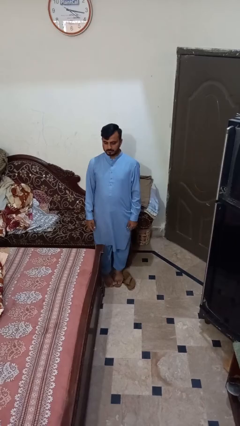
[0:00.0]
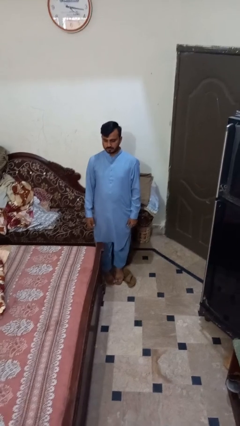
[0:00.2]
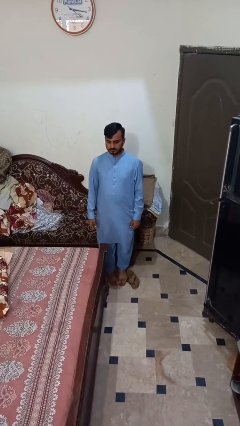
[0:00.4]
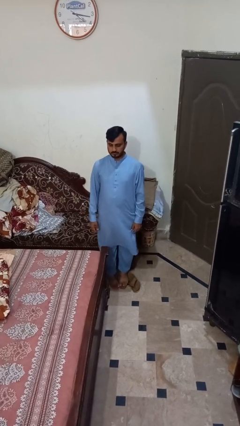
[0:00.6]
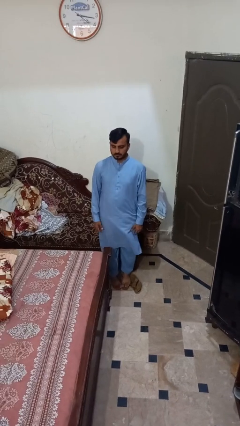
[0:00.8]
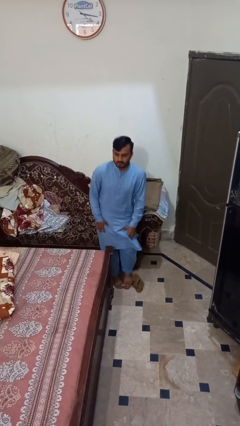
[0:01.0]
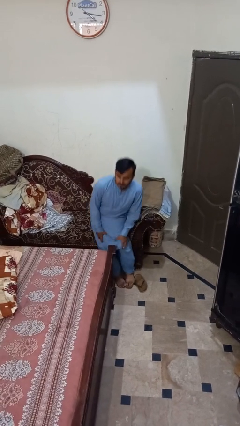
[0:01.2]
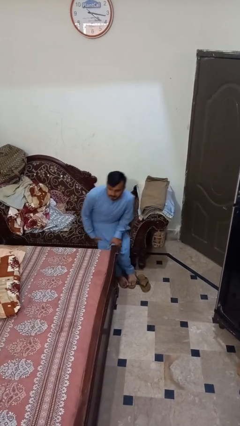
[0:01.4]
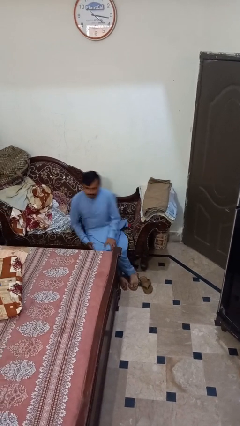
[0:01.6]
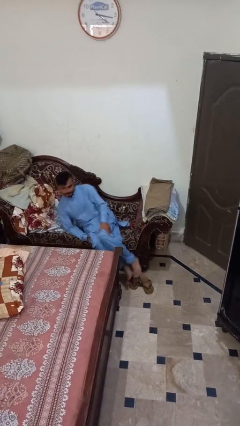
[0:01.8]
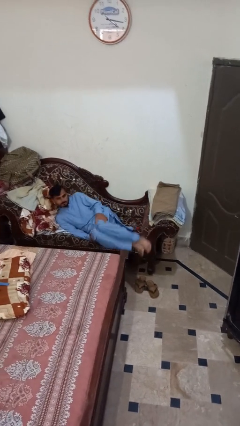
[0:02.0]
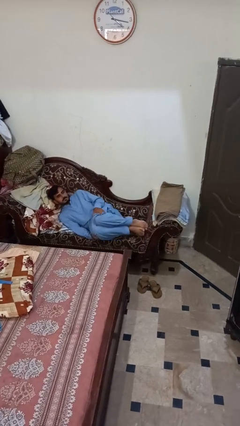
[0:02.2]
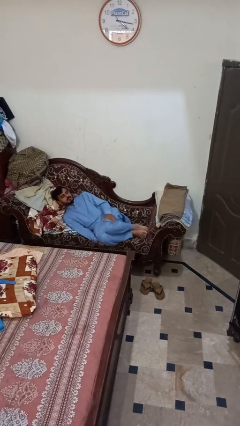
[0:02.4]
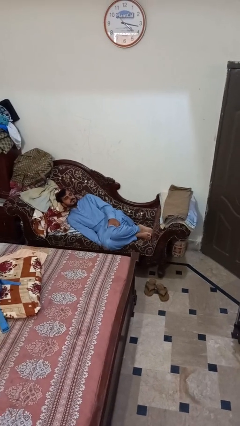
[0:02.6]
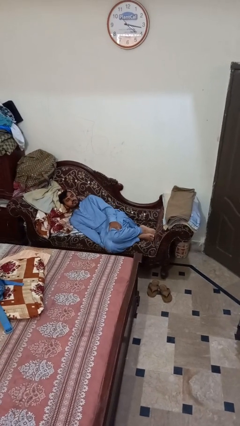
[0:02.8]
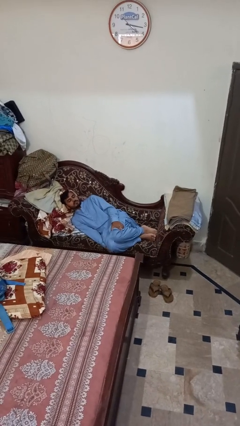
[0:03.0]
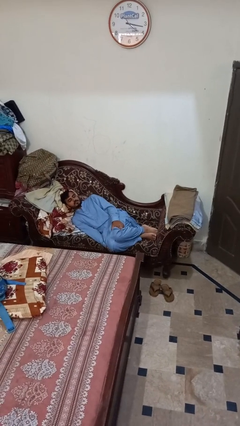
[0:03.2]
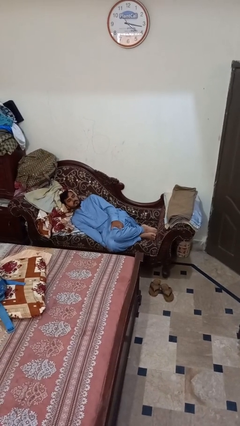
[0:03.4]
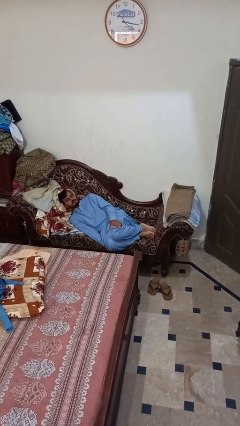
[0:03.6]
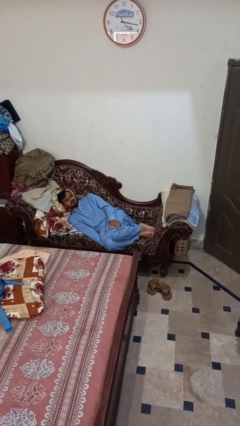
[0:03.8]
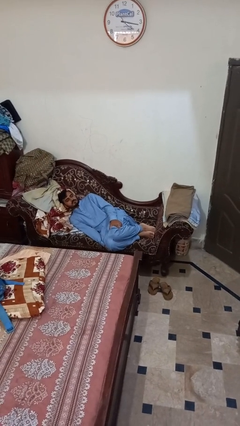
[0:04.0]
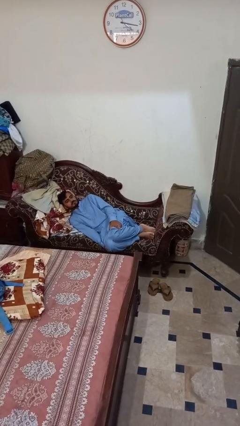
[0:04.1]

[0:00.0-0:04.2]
person lies down on couch

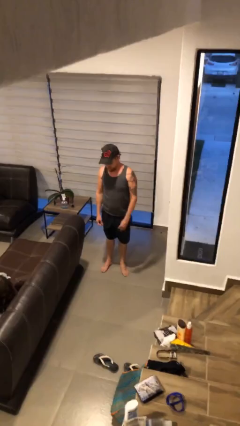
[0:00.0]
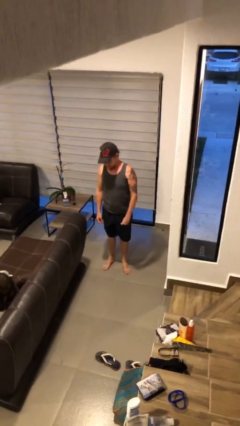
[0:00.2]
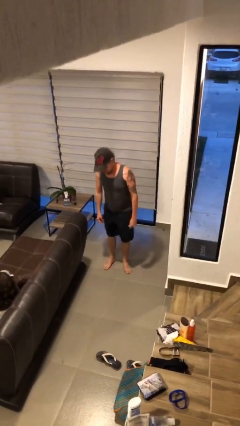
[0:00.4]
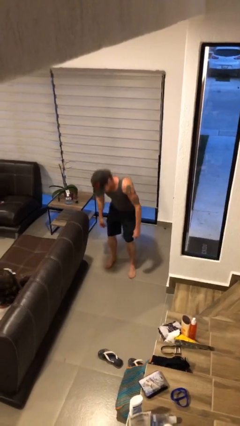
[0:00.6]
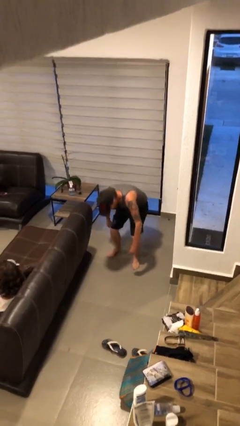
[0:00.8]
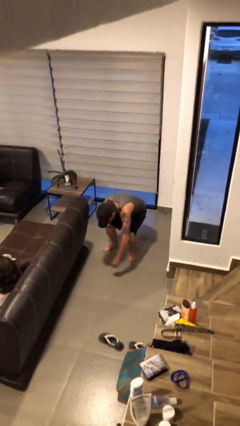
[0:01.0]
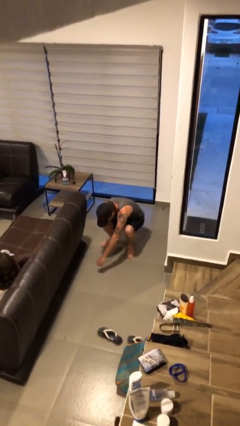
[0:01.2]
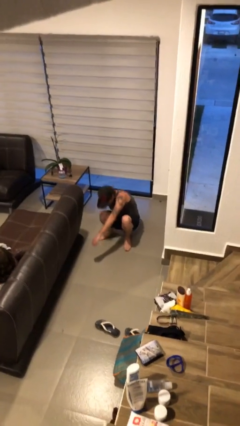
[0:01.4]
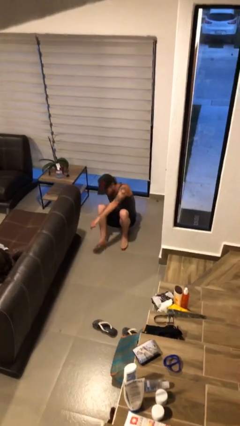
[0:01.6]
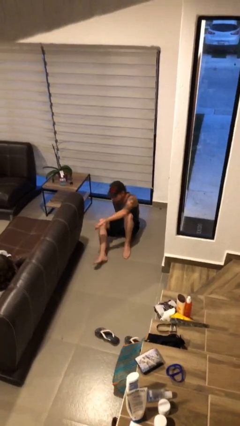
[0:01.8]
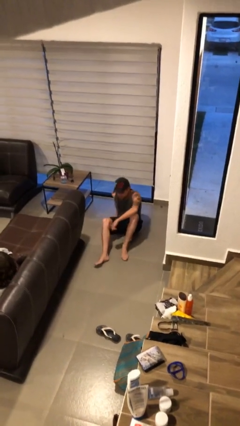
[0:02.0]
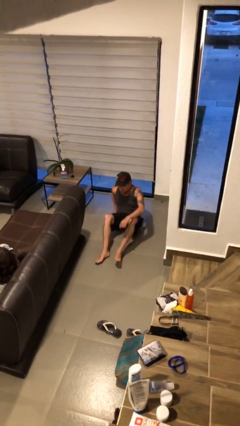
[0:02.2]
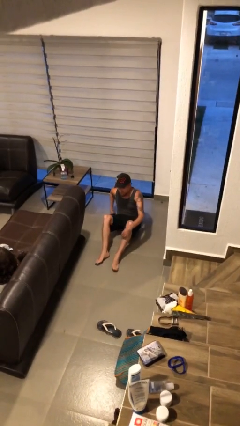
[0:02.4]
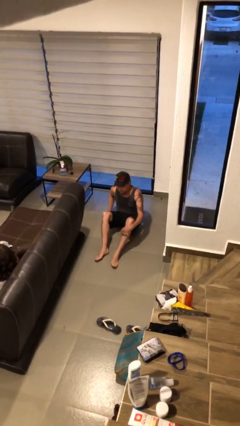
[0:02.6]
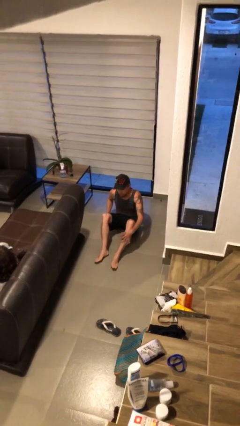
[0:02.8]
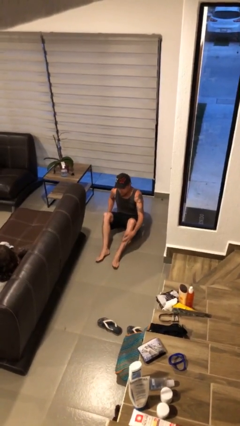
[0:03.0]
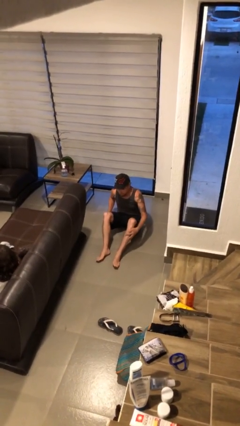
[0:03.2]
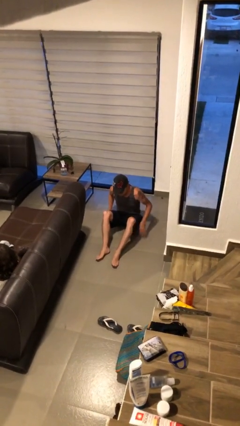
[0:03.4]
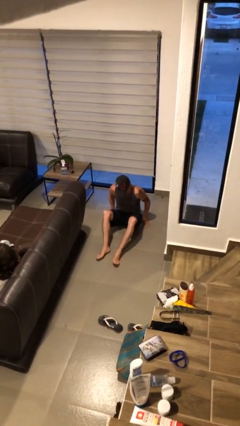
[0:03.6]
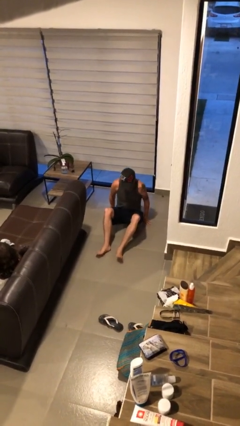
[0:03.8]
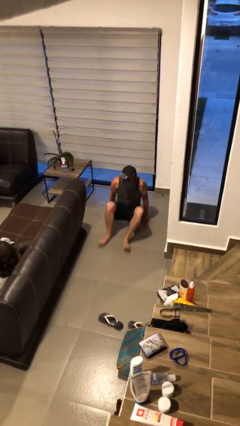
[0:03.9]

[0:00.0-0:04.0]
person sits down

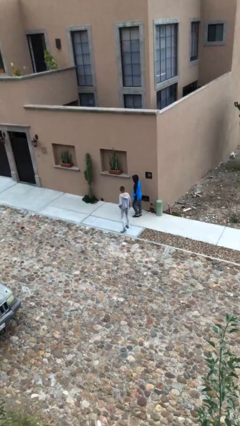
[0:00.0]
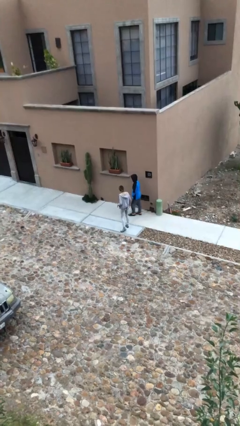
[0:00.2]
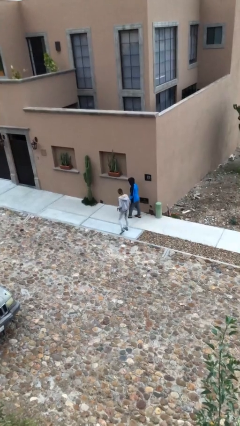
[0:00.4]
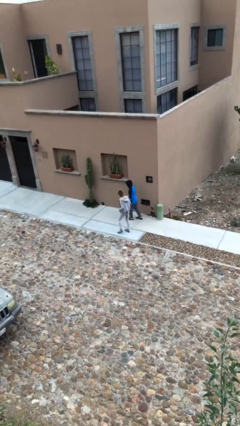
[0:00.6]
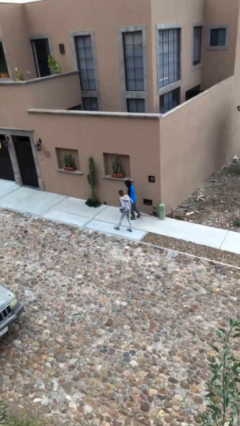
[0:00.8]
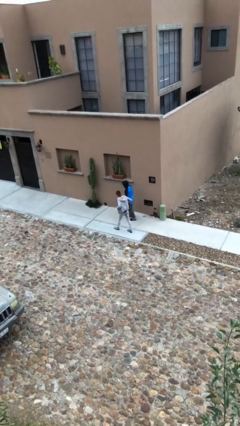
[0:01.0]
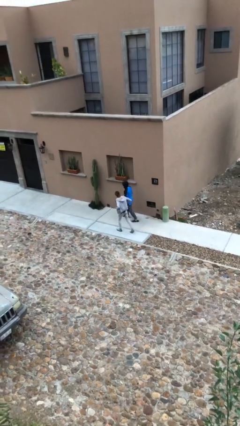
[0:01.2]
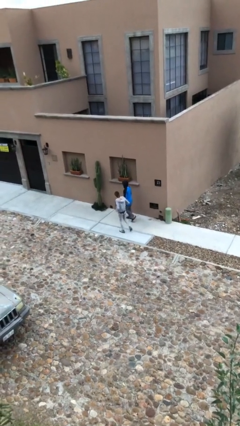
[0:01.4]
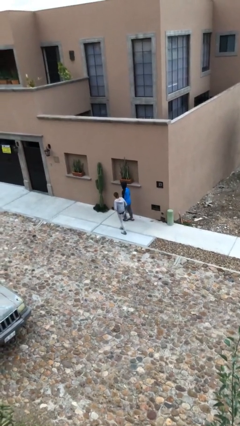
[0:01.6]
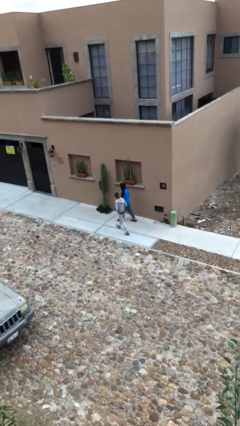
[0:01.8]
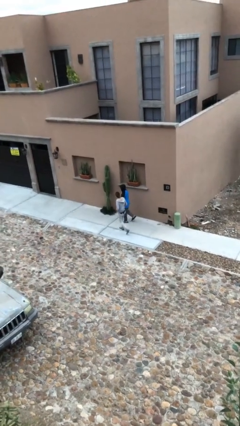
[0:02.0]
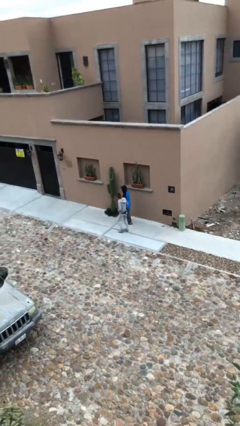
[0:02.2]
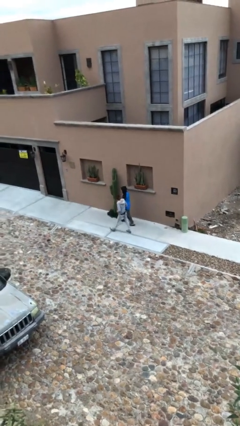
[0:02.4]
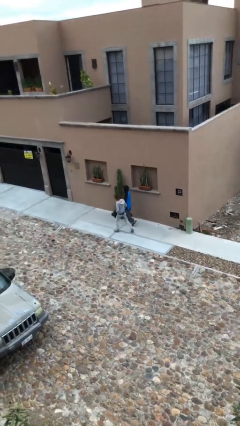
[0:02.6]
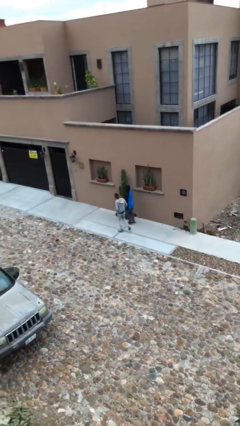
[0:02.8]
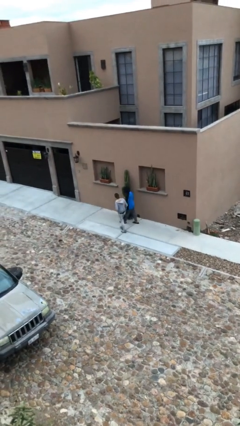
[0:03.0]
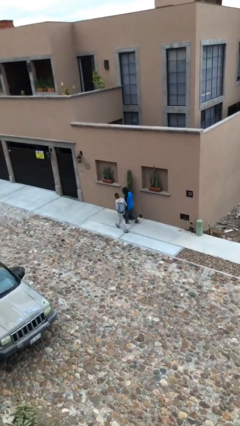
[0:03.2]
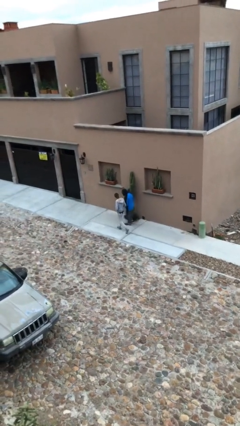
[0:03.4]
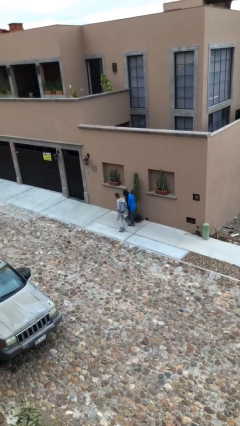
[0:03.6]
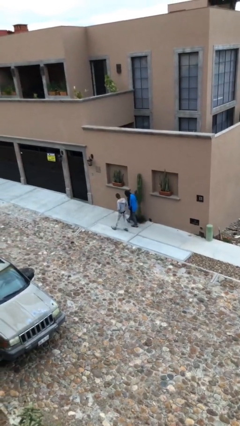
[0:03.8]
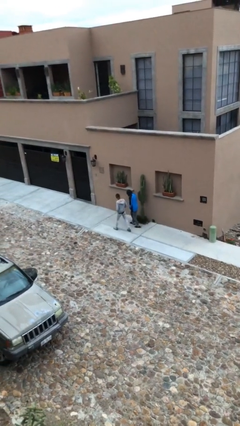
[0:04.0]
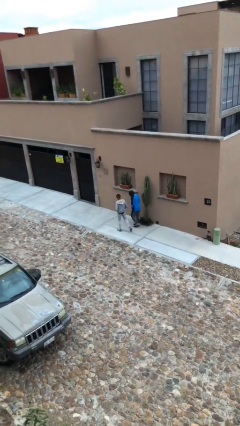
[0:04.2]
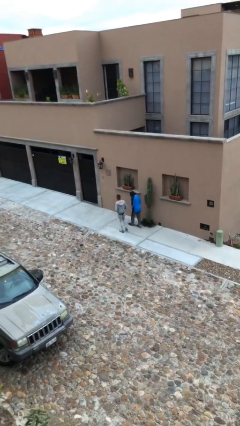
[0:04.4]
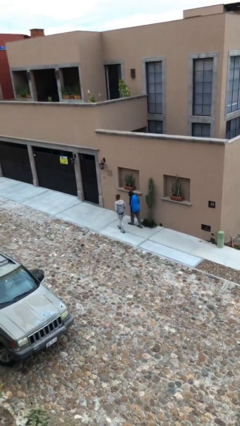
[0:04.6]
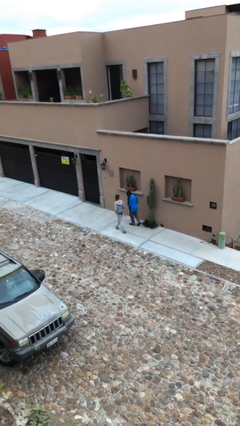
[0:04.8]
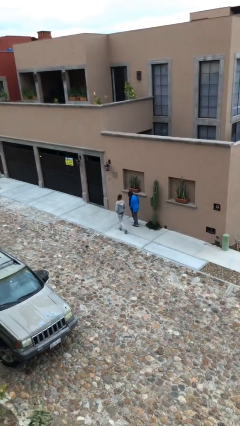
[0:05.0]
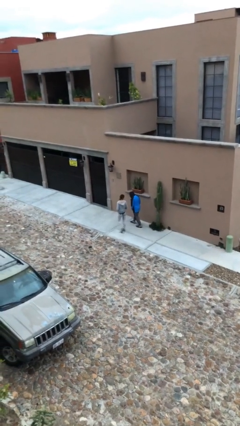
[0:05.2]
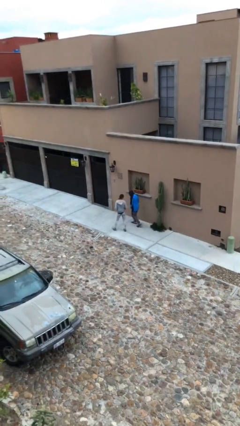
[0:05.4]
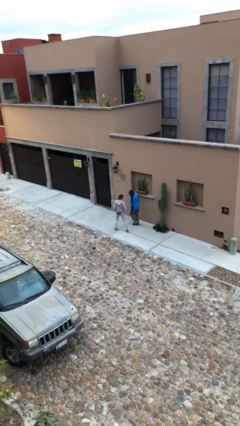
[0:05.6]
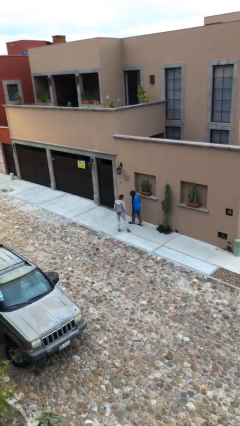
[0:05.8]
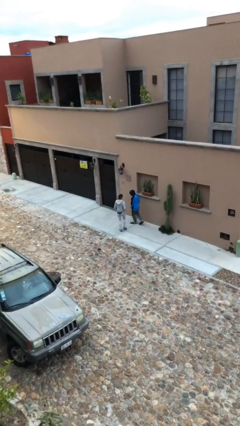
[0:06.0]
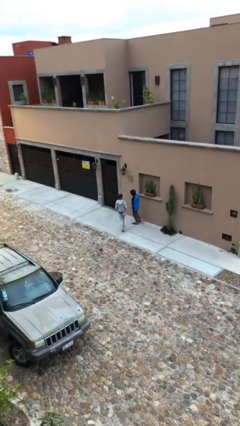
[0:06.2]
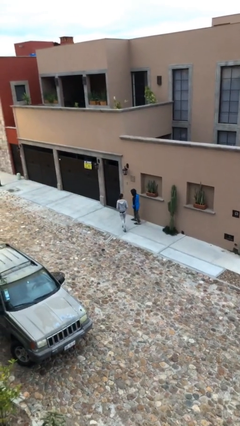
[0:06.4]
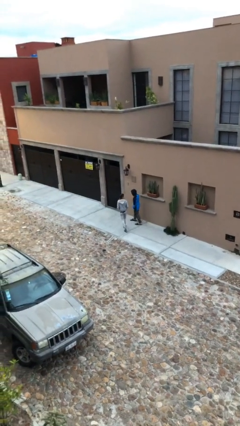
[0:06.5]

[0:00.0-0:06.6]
person talks to person

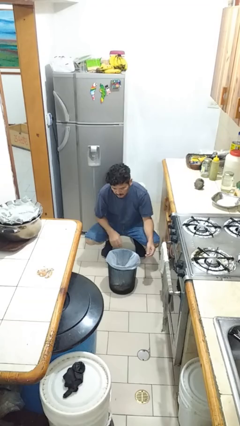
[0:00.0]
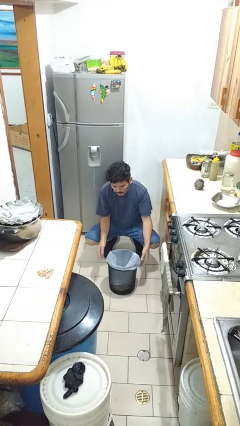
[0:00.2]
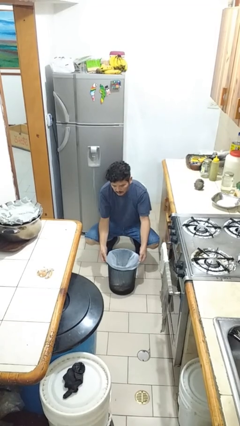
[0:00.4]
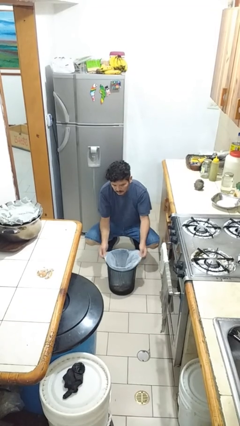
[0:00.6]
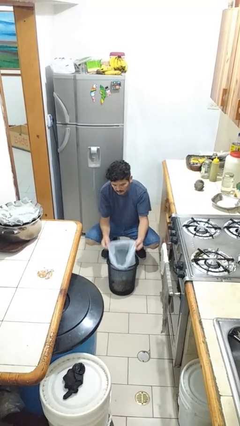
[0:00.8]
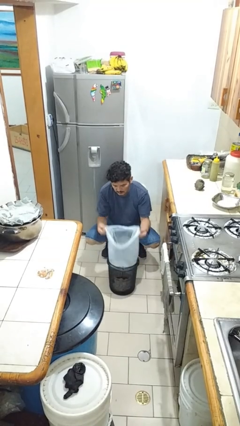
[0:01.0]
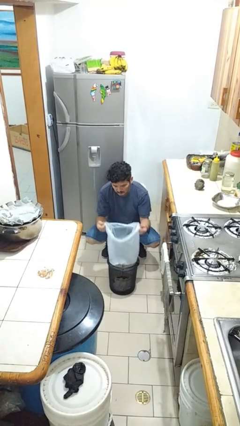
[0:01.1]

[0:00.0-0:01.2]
person removes trashbag from trashcan

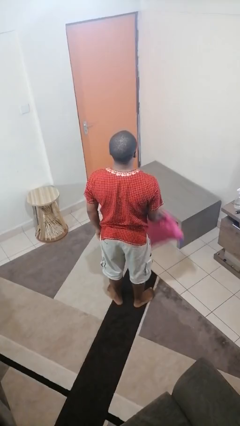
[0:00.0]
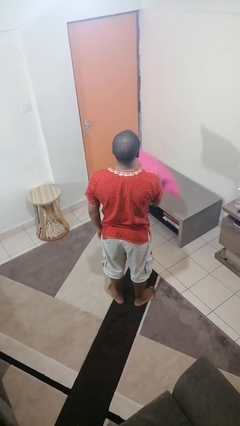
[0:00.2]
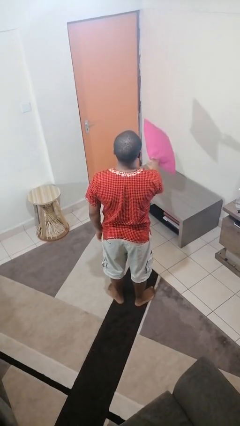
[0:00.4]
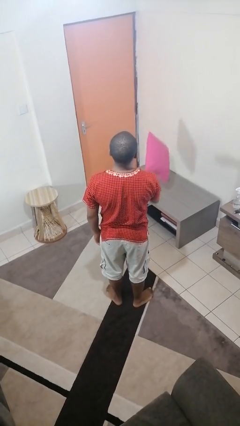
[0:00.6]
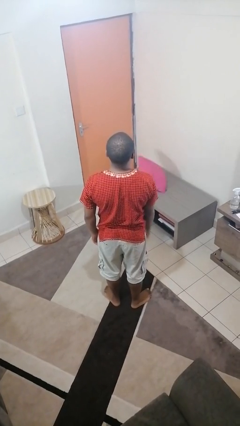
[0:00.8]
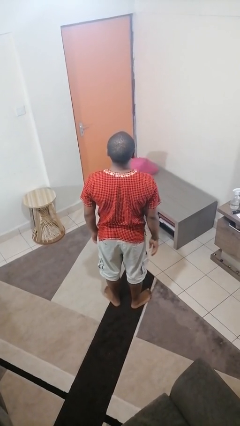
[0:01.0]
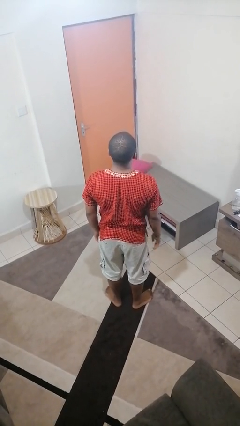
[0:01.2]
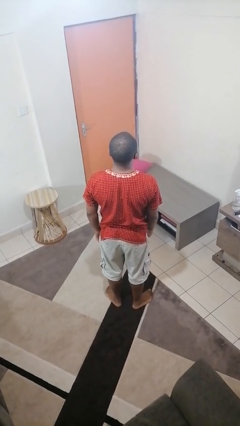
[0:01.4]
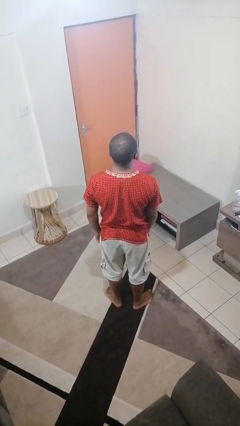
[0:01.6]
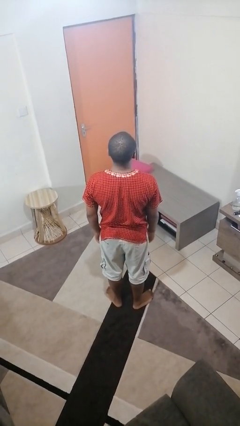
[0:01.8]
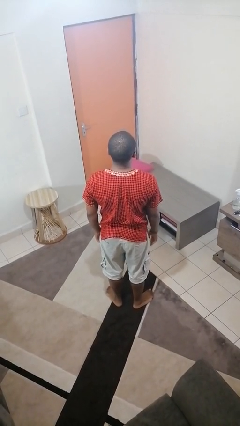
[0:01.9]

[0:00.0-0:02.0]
person throws object on table
